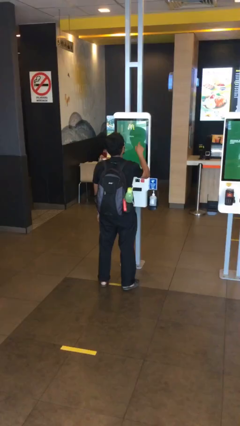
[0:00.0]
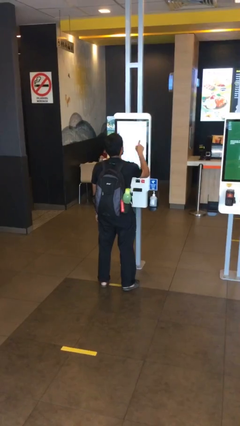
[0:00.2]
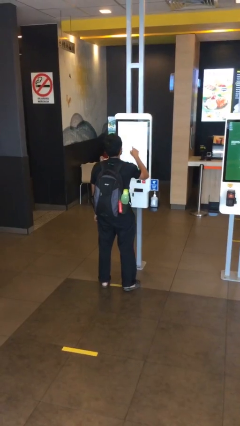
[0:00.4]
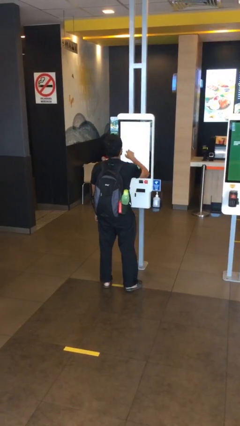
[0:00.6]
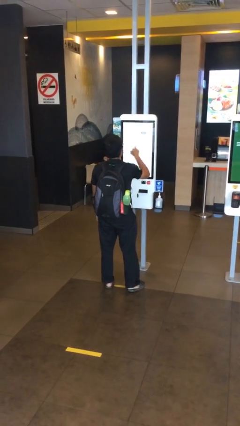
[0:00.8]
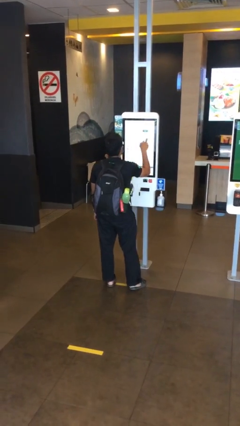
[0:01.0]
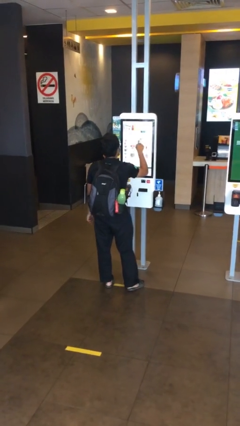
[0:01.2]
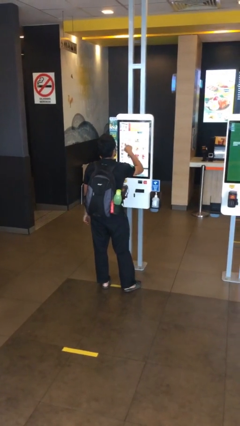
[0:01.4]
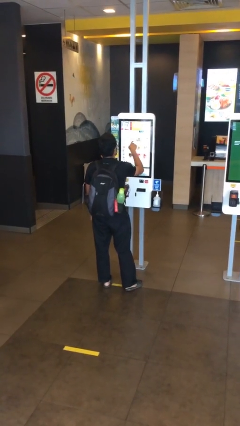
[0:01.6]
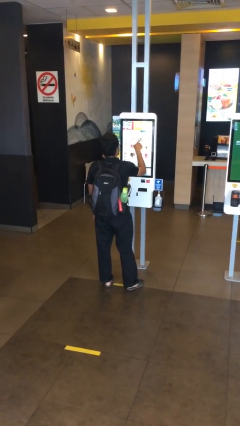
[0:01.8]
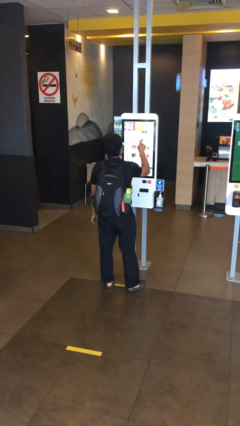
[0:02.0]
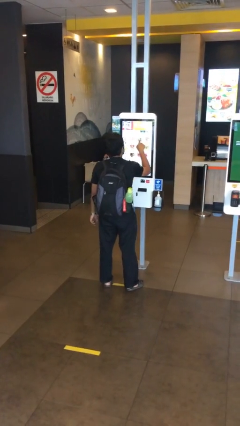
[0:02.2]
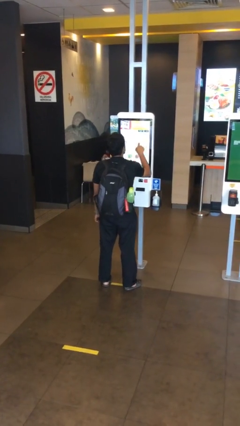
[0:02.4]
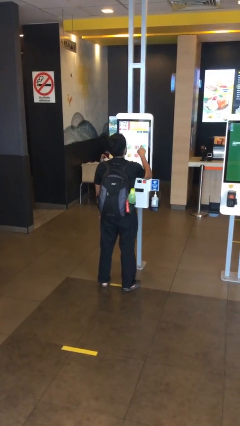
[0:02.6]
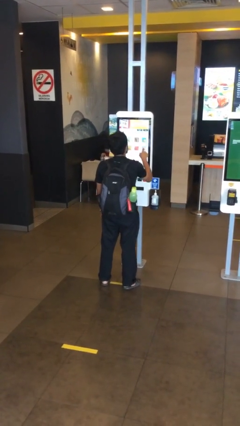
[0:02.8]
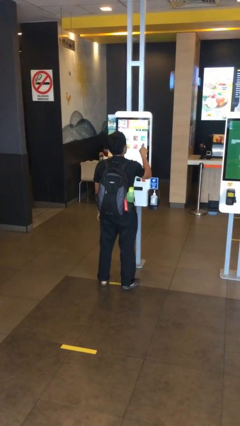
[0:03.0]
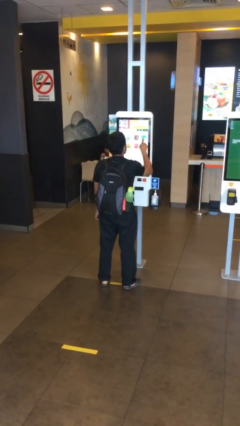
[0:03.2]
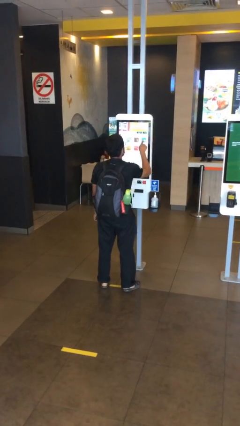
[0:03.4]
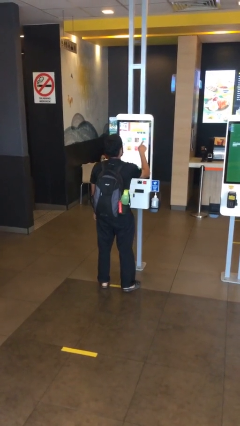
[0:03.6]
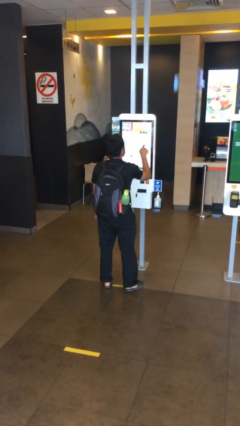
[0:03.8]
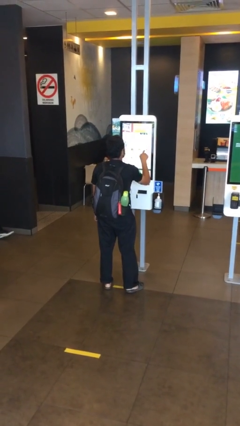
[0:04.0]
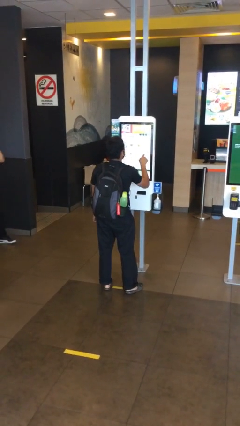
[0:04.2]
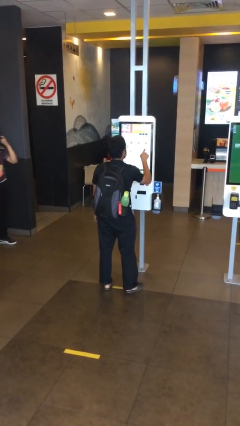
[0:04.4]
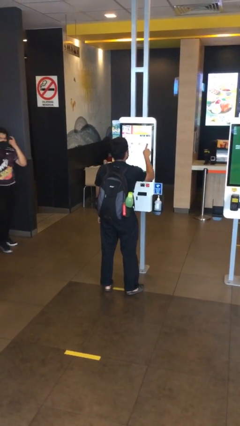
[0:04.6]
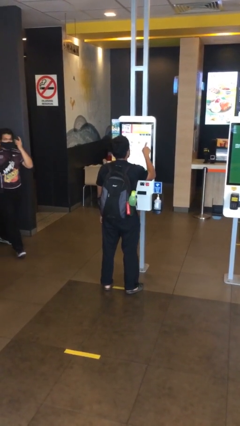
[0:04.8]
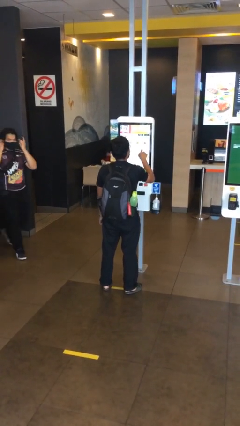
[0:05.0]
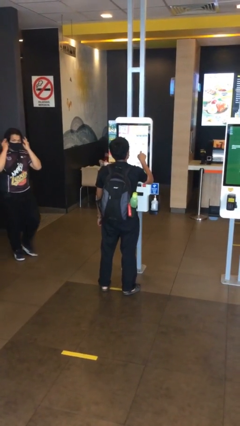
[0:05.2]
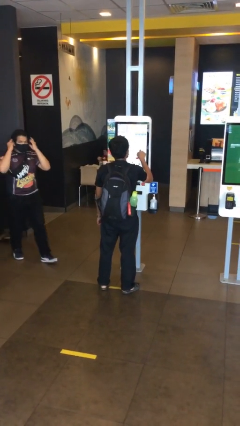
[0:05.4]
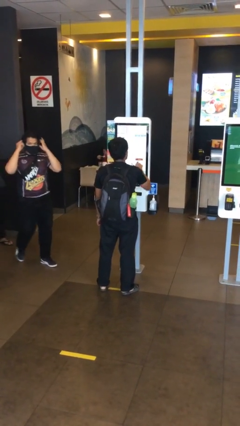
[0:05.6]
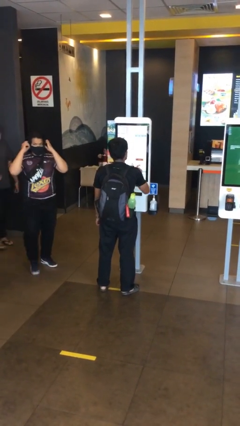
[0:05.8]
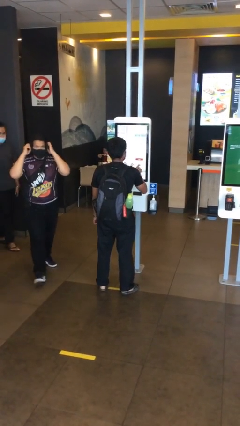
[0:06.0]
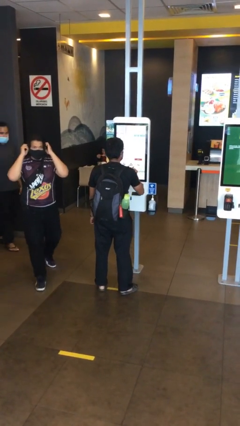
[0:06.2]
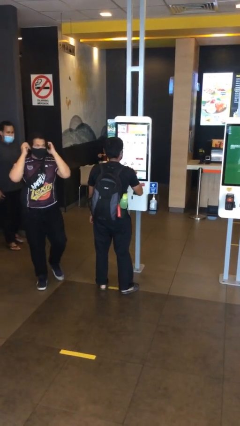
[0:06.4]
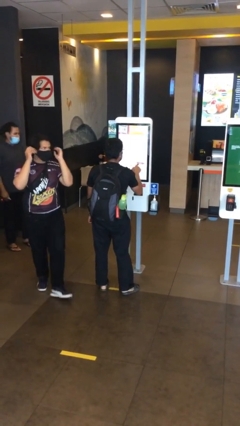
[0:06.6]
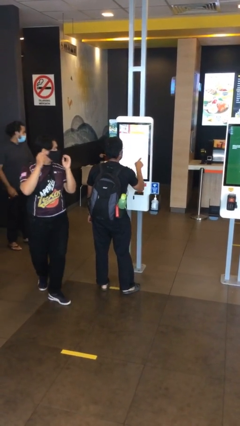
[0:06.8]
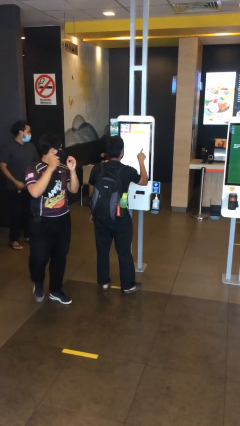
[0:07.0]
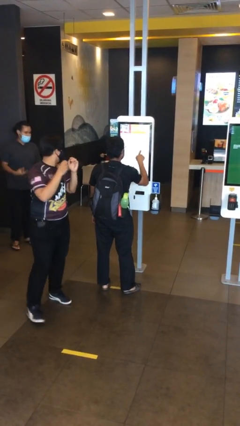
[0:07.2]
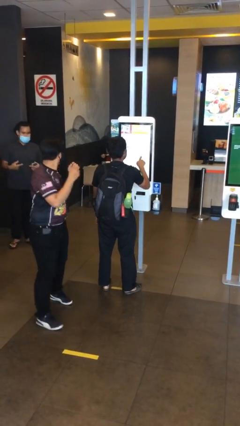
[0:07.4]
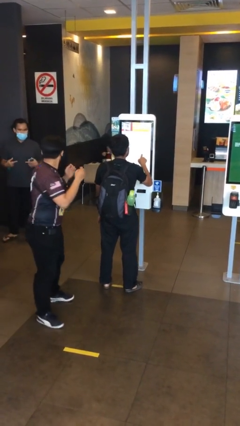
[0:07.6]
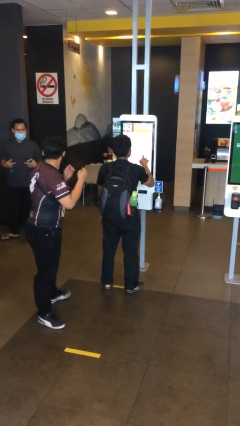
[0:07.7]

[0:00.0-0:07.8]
person purchases from machine

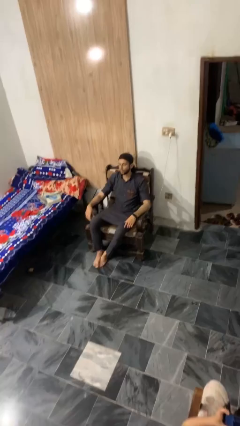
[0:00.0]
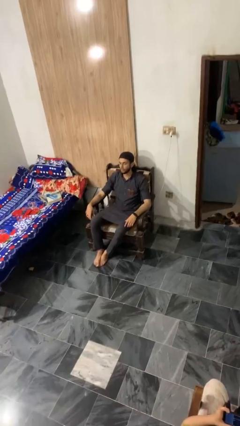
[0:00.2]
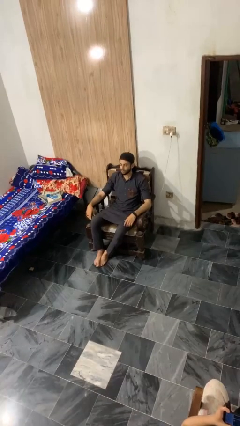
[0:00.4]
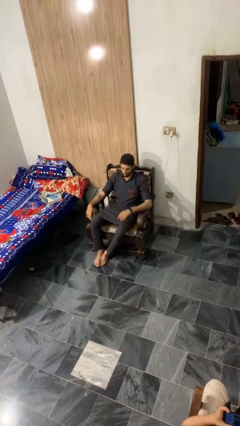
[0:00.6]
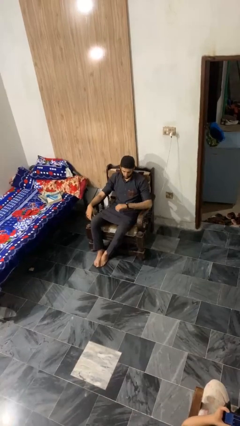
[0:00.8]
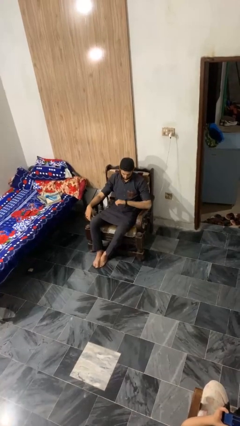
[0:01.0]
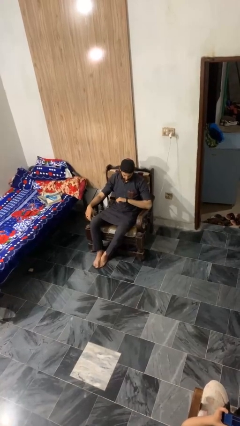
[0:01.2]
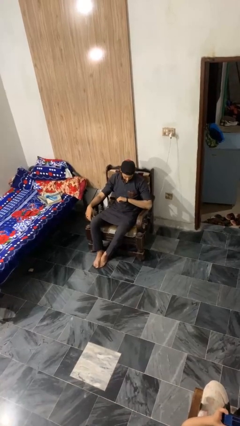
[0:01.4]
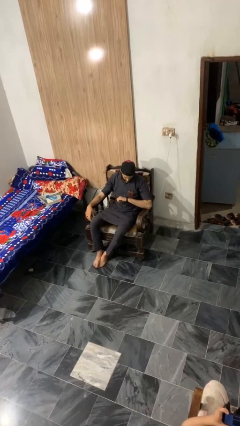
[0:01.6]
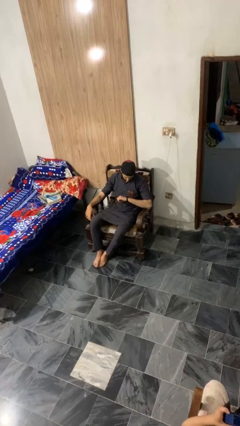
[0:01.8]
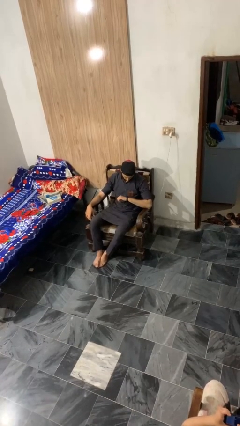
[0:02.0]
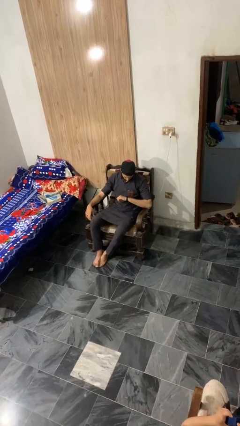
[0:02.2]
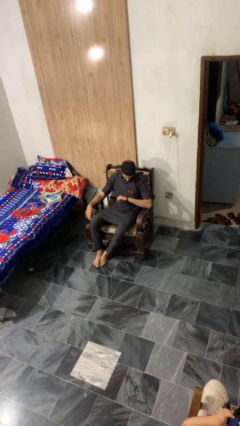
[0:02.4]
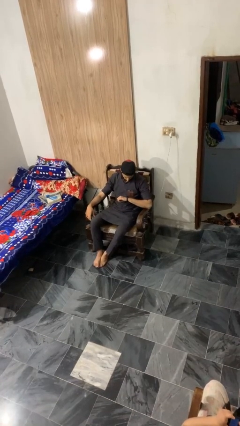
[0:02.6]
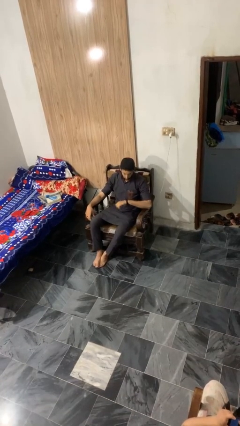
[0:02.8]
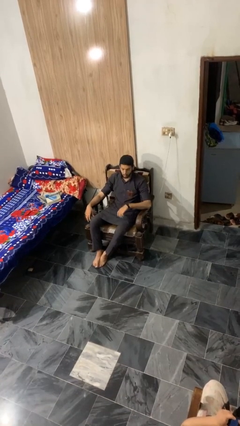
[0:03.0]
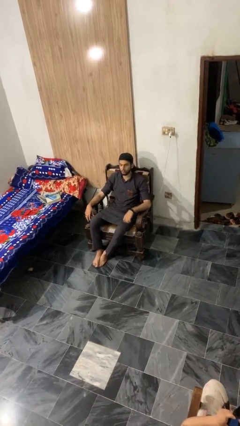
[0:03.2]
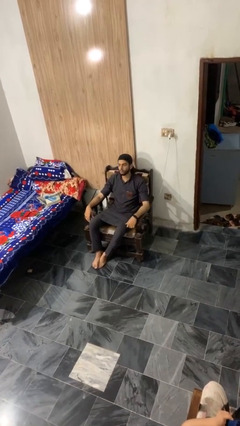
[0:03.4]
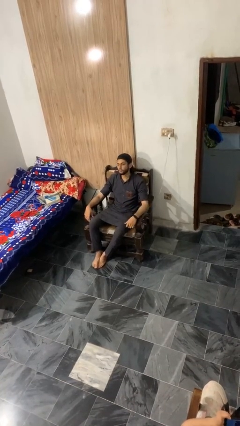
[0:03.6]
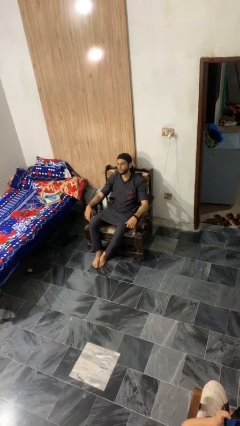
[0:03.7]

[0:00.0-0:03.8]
person looks at wristwatch

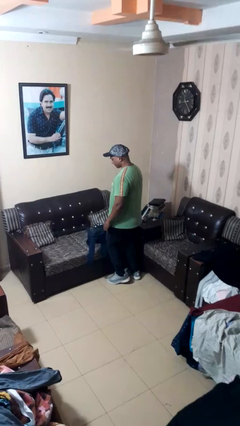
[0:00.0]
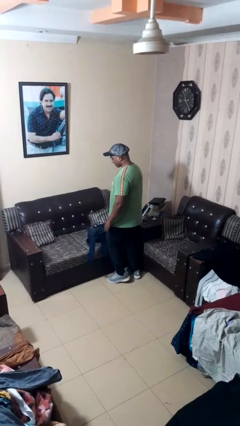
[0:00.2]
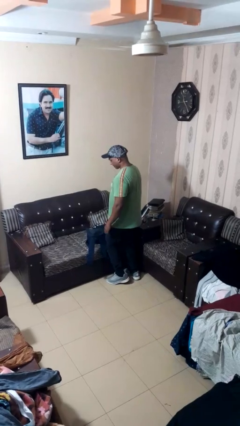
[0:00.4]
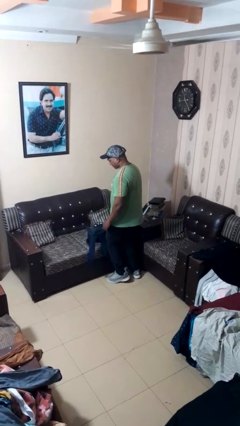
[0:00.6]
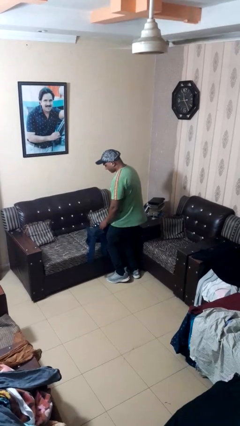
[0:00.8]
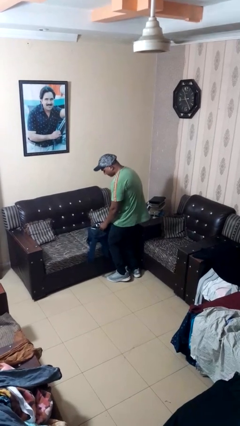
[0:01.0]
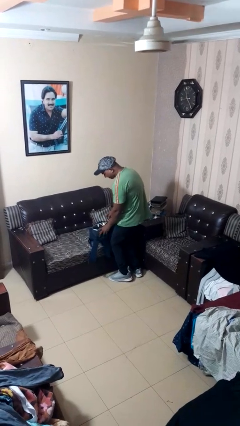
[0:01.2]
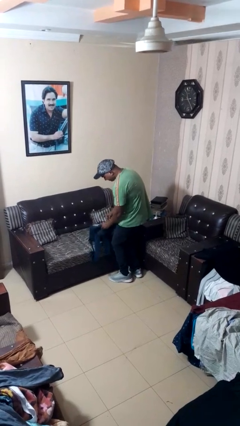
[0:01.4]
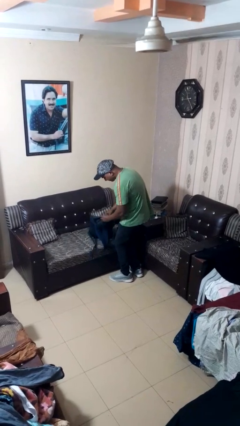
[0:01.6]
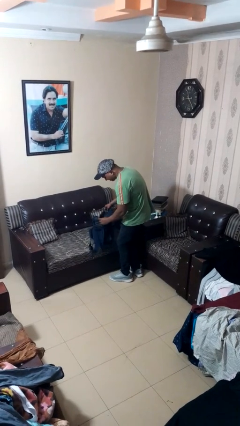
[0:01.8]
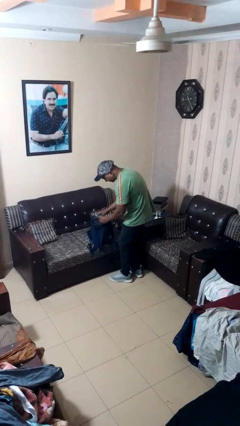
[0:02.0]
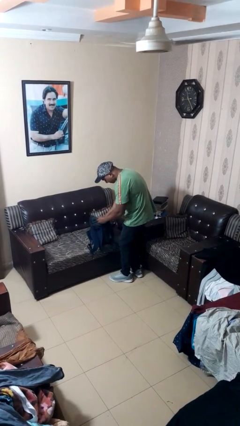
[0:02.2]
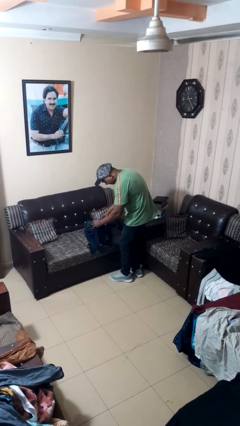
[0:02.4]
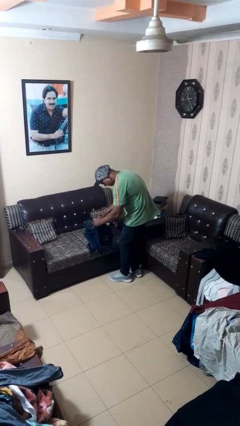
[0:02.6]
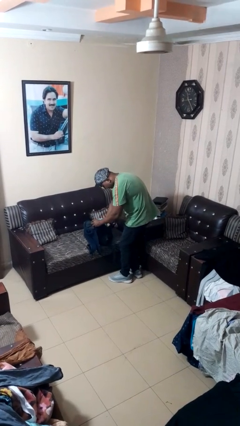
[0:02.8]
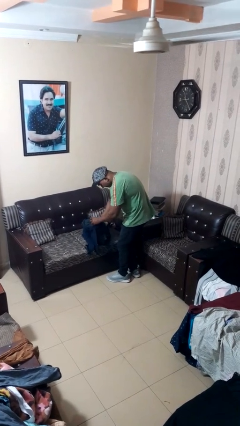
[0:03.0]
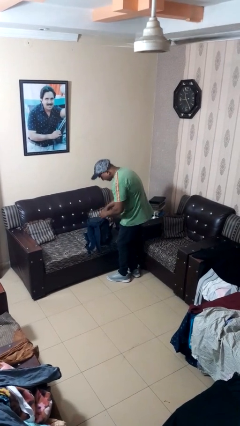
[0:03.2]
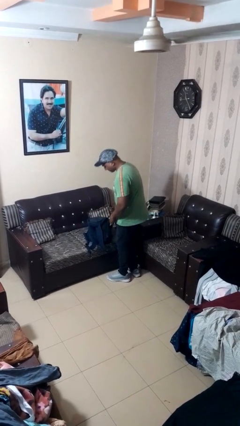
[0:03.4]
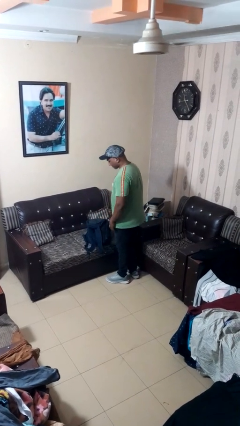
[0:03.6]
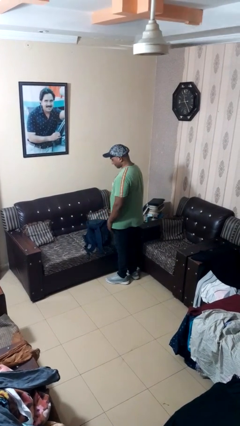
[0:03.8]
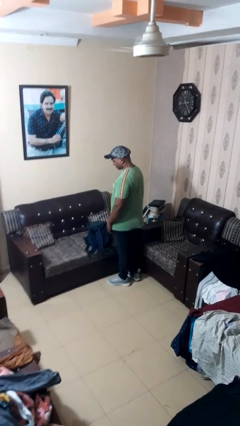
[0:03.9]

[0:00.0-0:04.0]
person searches in bag

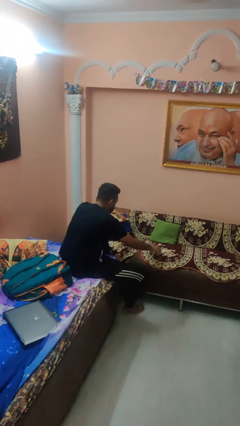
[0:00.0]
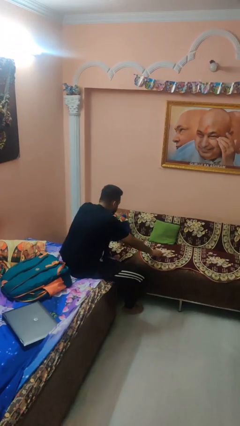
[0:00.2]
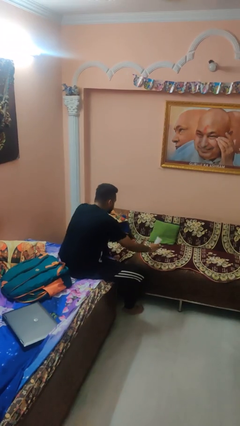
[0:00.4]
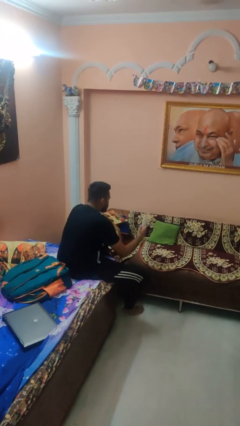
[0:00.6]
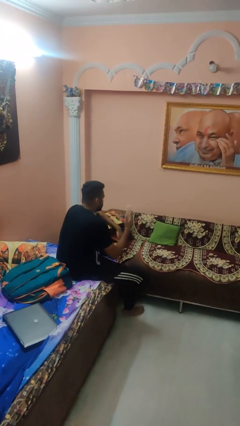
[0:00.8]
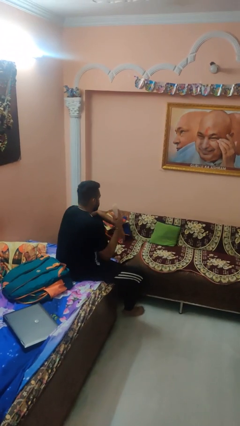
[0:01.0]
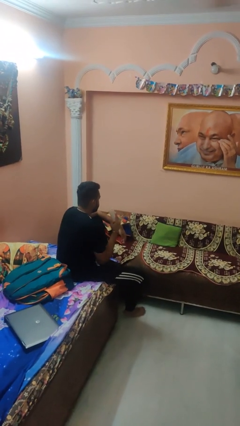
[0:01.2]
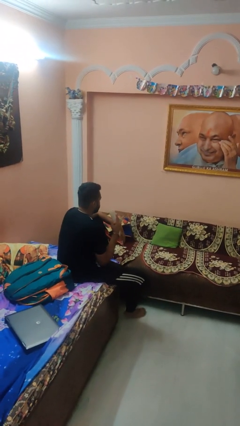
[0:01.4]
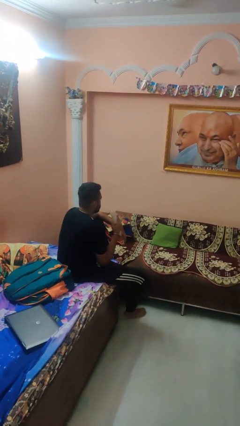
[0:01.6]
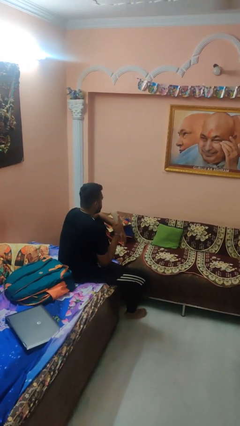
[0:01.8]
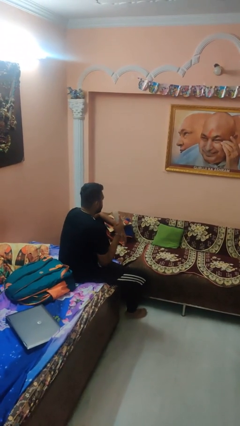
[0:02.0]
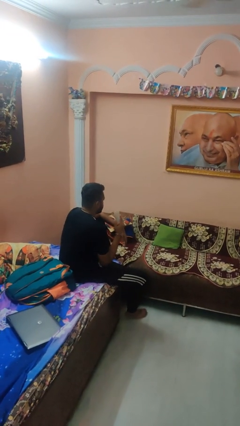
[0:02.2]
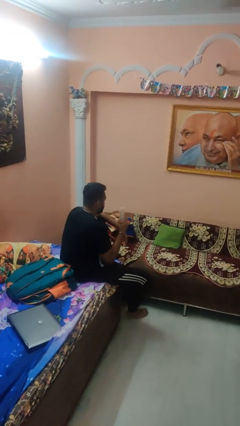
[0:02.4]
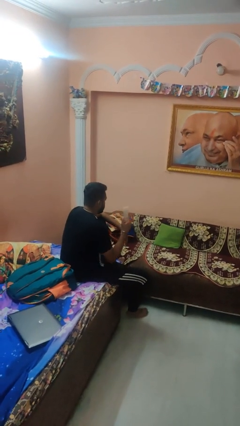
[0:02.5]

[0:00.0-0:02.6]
person picks up object from couch
